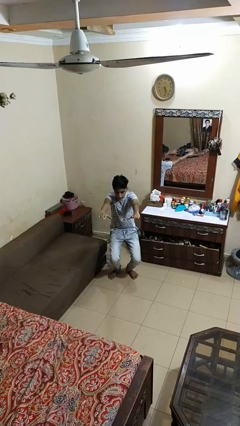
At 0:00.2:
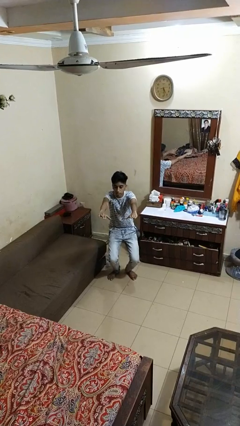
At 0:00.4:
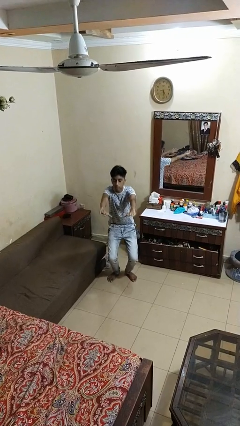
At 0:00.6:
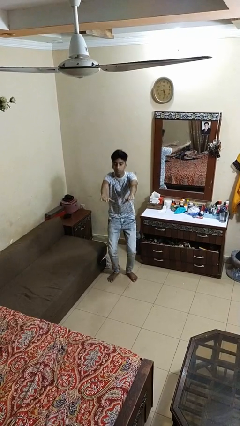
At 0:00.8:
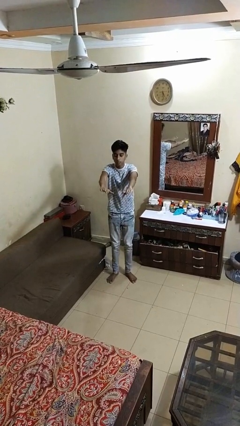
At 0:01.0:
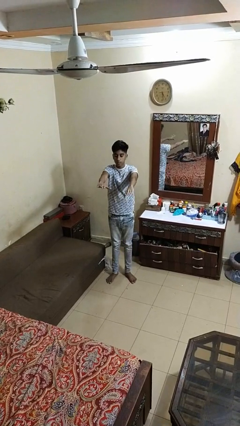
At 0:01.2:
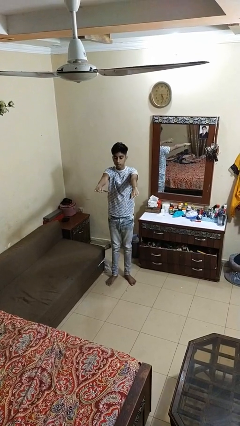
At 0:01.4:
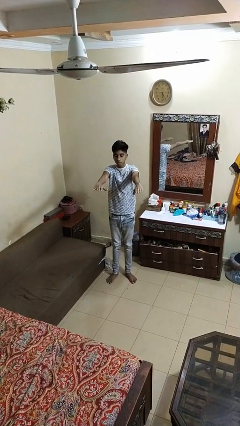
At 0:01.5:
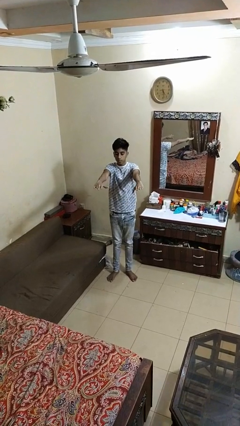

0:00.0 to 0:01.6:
person stands up

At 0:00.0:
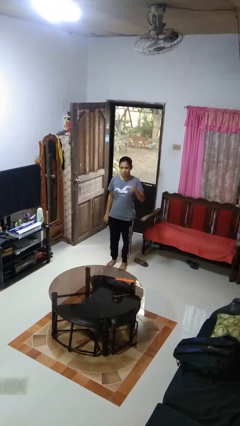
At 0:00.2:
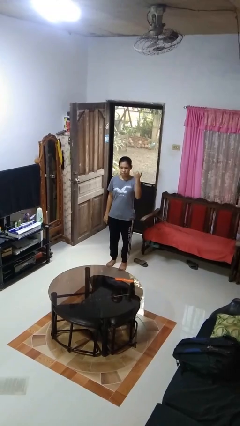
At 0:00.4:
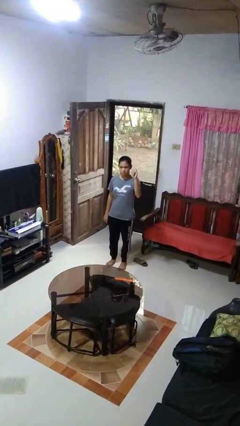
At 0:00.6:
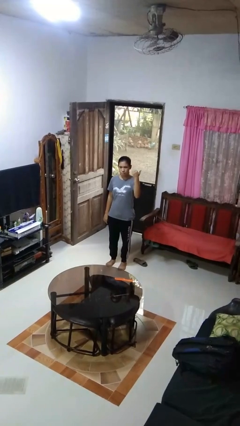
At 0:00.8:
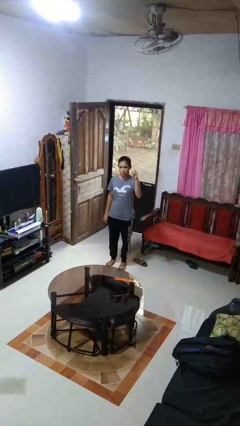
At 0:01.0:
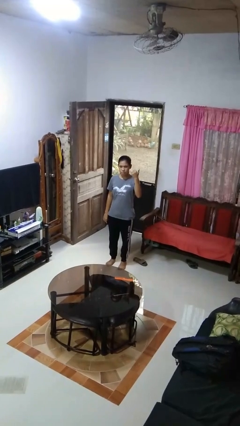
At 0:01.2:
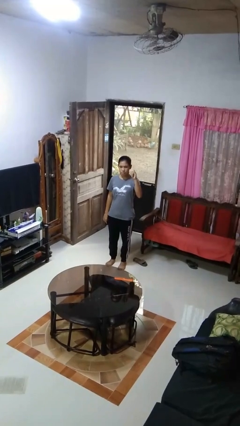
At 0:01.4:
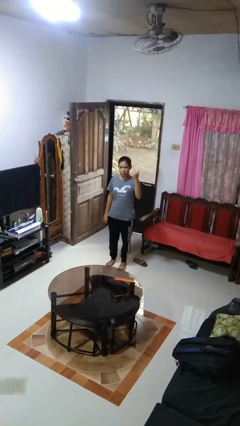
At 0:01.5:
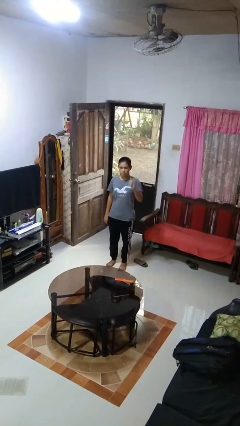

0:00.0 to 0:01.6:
person gestures hang loose

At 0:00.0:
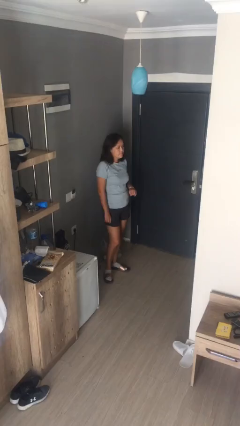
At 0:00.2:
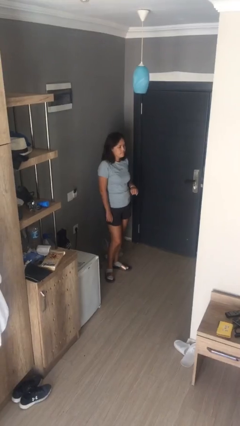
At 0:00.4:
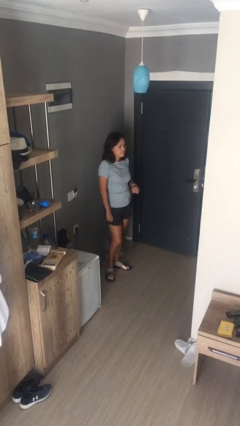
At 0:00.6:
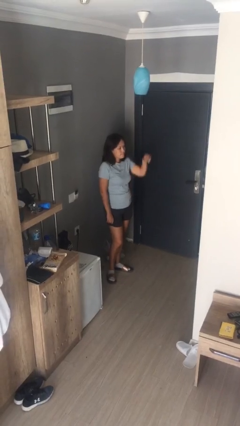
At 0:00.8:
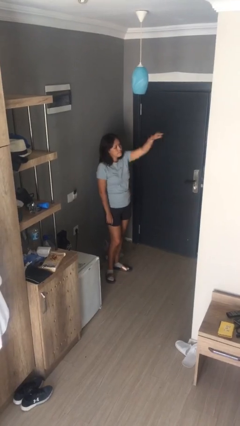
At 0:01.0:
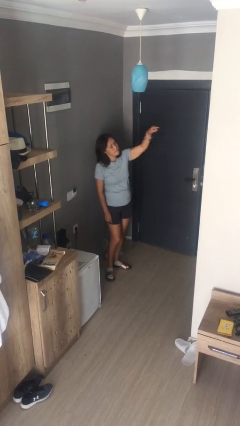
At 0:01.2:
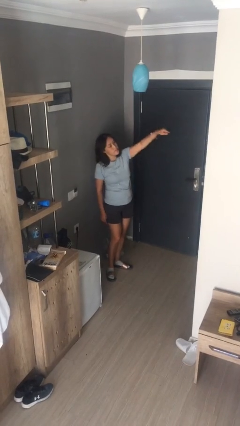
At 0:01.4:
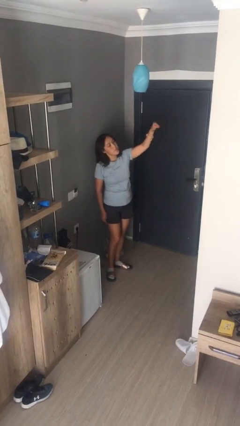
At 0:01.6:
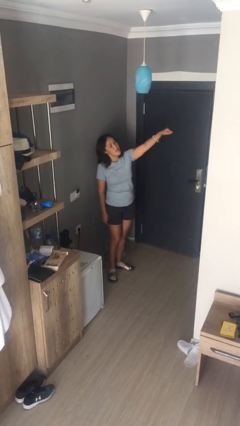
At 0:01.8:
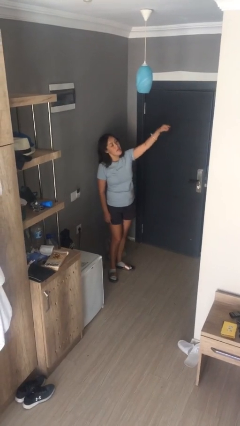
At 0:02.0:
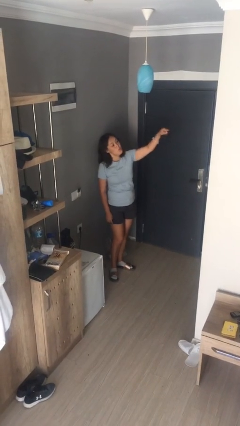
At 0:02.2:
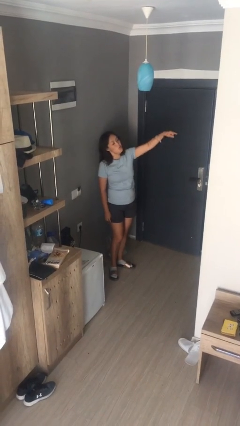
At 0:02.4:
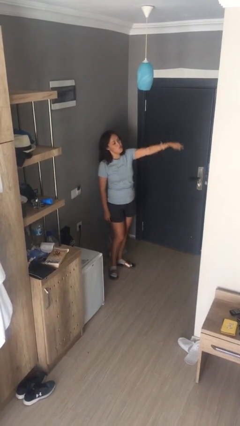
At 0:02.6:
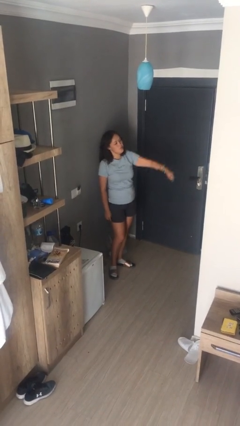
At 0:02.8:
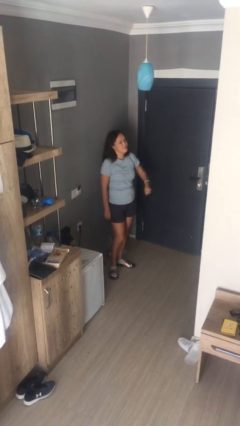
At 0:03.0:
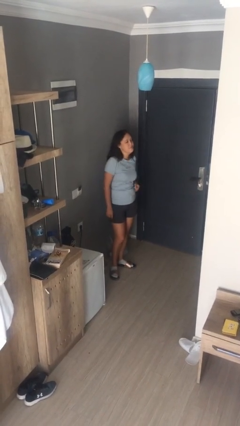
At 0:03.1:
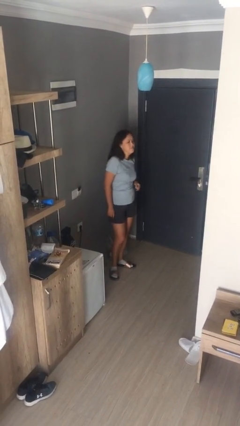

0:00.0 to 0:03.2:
person points at person

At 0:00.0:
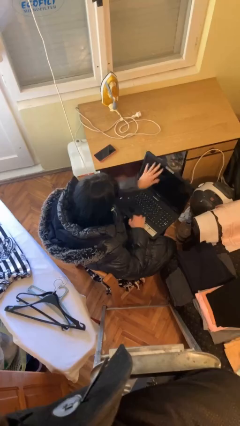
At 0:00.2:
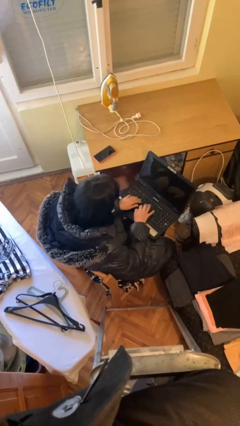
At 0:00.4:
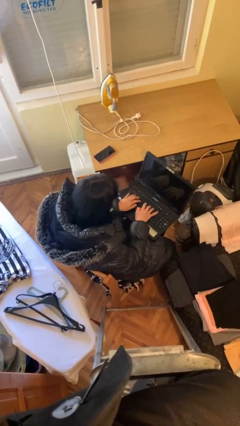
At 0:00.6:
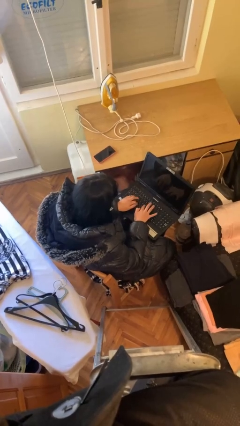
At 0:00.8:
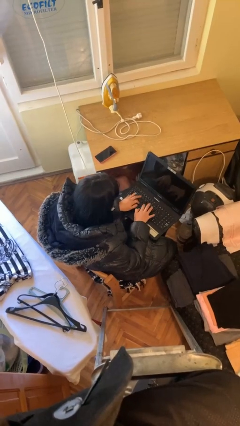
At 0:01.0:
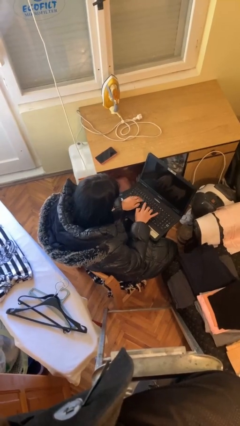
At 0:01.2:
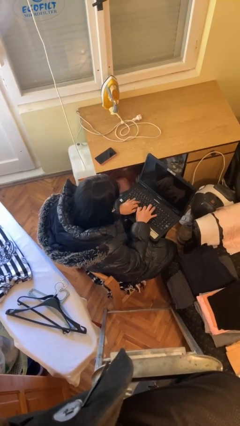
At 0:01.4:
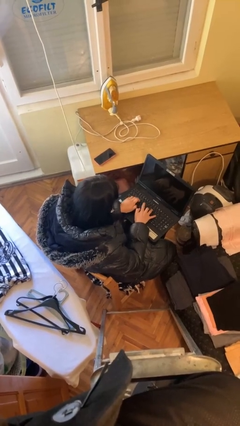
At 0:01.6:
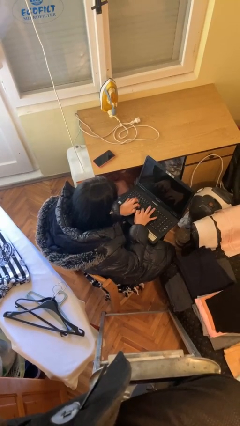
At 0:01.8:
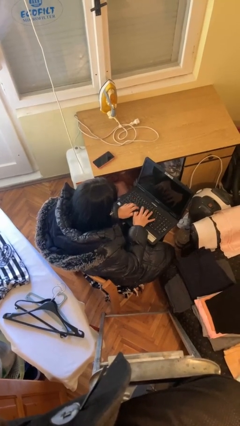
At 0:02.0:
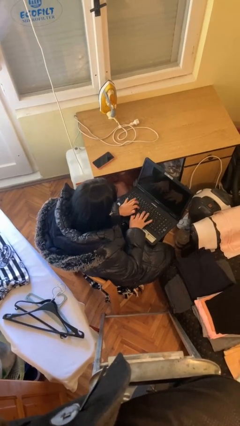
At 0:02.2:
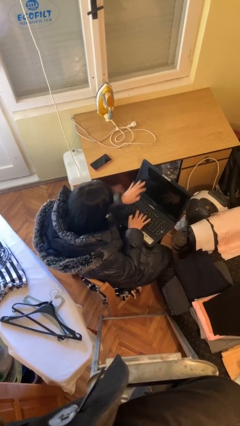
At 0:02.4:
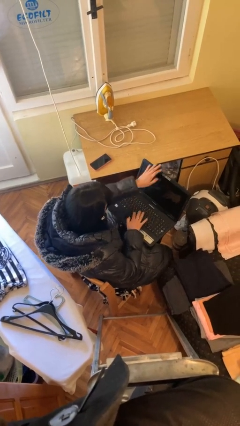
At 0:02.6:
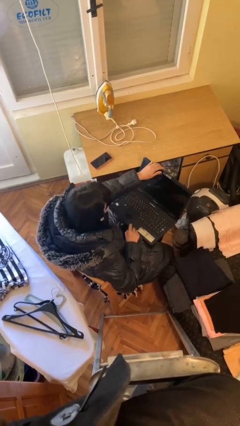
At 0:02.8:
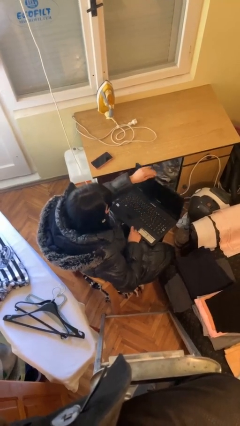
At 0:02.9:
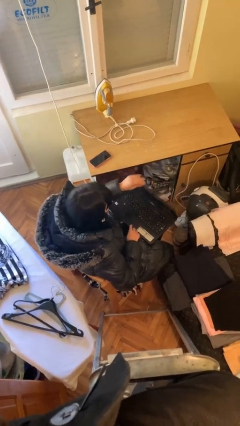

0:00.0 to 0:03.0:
person interacts with laptop

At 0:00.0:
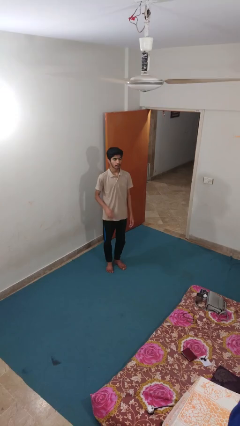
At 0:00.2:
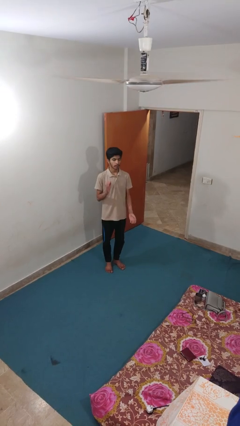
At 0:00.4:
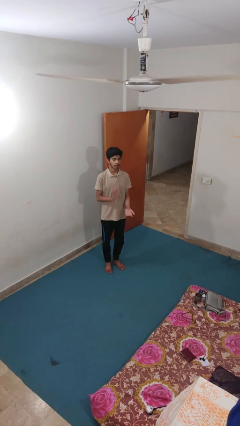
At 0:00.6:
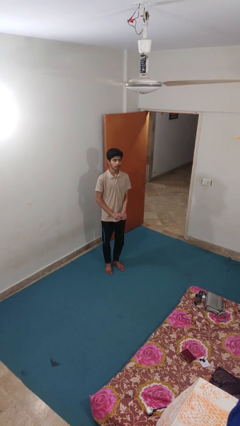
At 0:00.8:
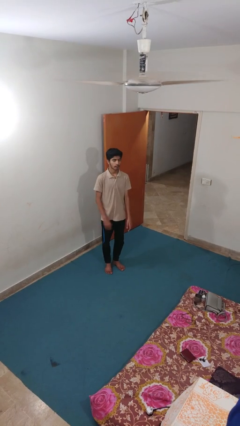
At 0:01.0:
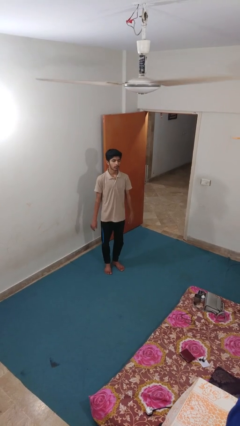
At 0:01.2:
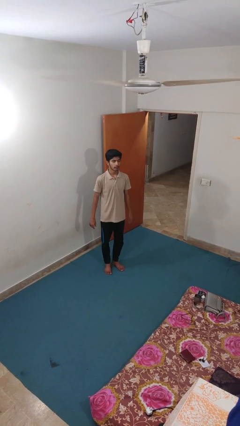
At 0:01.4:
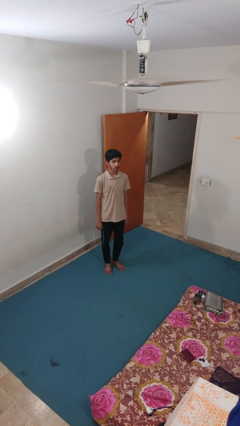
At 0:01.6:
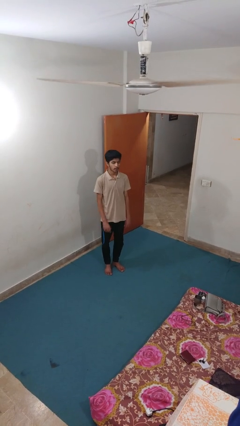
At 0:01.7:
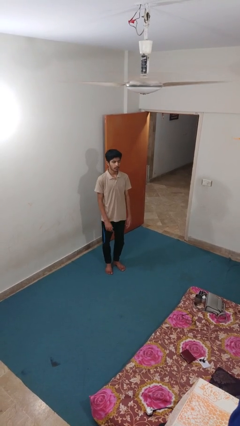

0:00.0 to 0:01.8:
person claps hands

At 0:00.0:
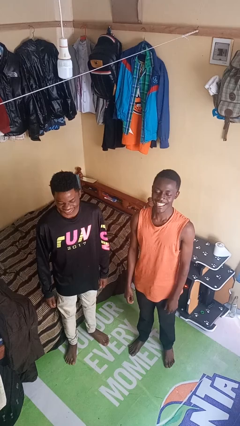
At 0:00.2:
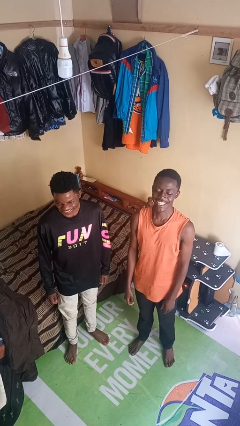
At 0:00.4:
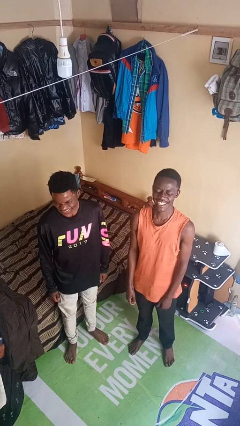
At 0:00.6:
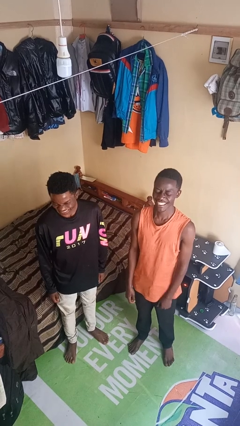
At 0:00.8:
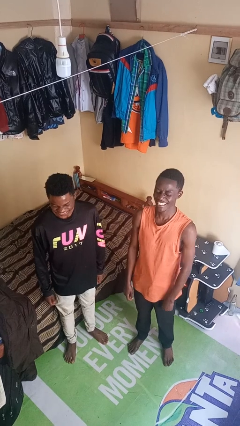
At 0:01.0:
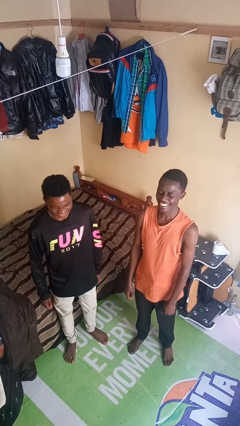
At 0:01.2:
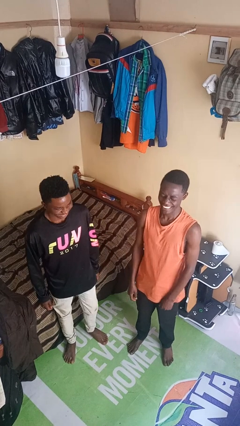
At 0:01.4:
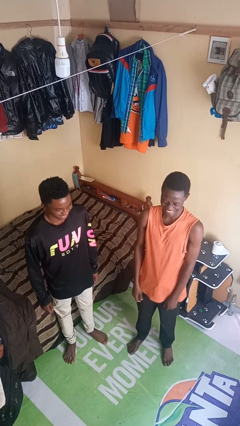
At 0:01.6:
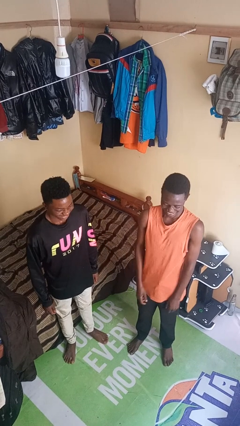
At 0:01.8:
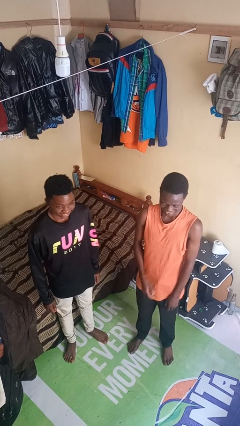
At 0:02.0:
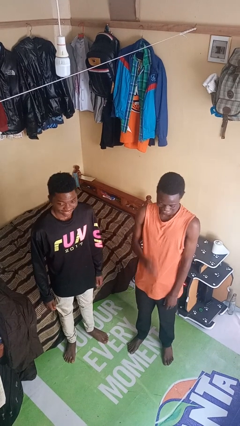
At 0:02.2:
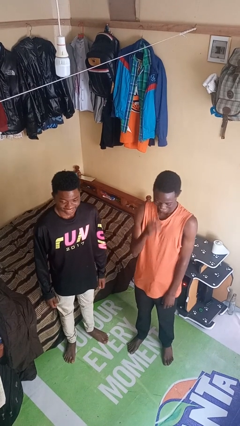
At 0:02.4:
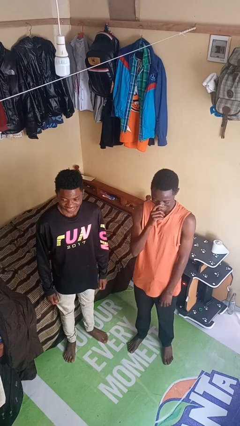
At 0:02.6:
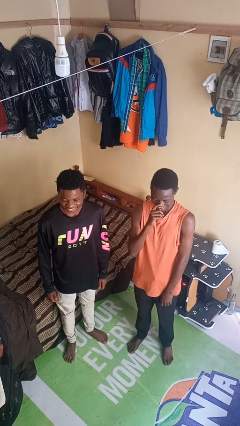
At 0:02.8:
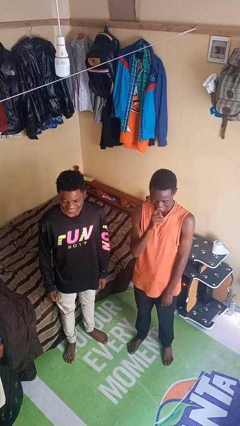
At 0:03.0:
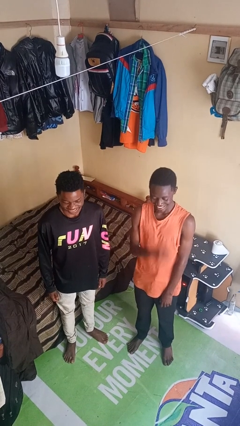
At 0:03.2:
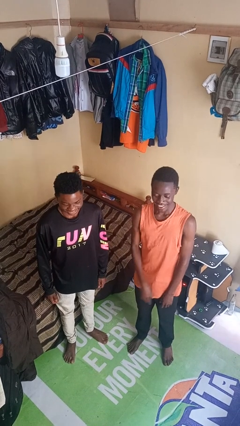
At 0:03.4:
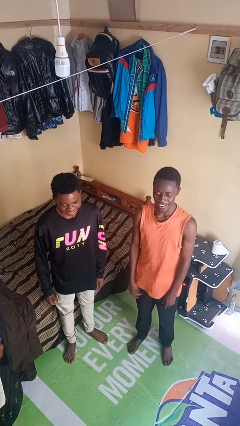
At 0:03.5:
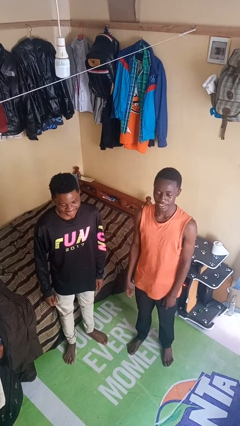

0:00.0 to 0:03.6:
person laughs with person

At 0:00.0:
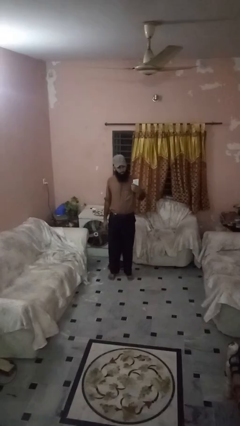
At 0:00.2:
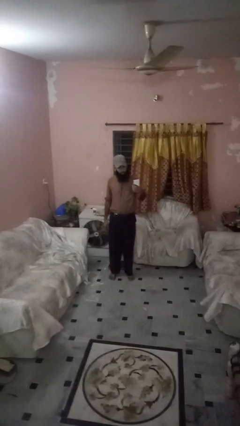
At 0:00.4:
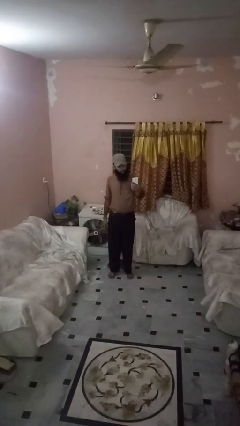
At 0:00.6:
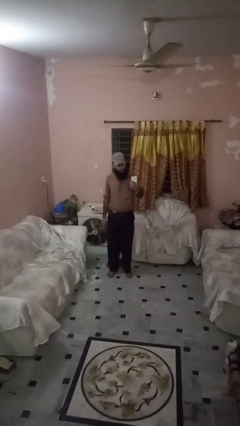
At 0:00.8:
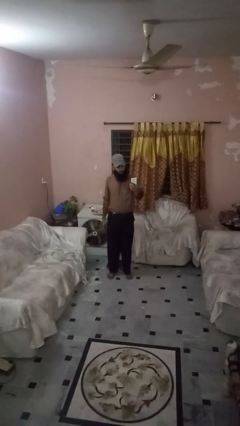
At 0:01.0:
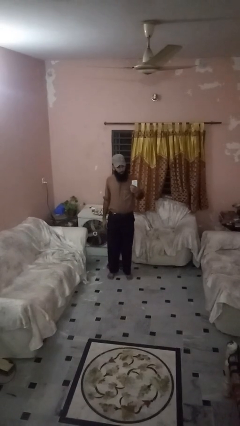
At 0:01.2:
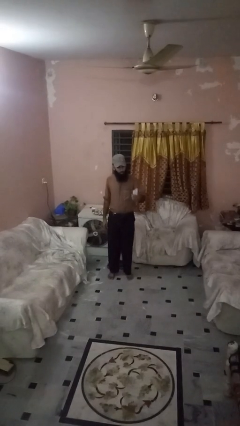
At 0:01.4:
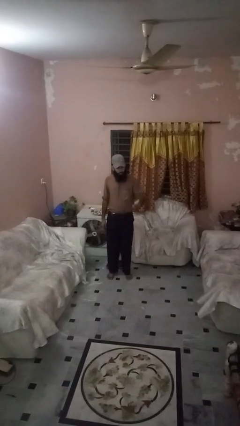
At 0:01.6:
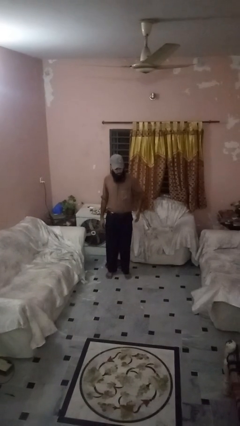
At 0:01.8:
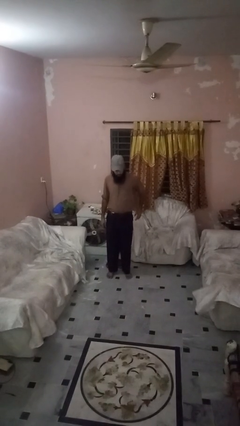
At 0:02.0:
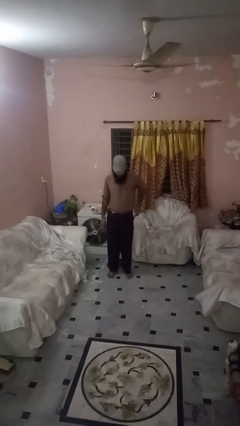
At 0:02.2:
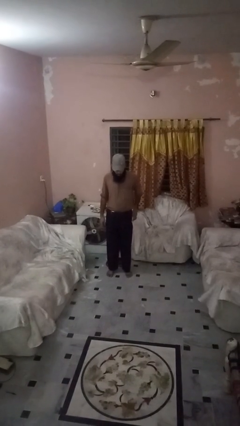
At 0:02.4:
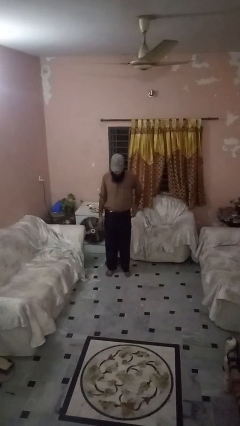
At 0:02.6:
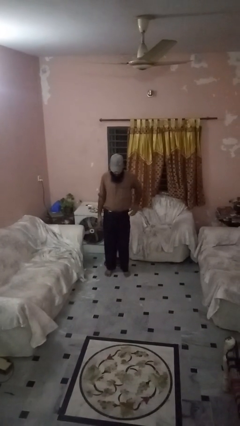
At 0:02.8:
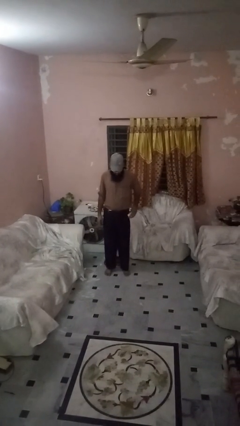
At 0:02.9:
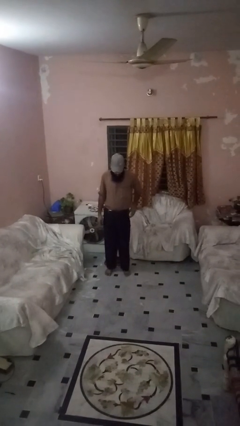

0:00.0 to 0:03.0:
person puts phone into pocket
